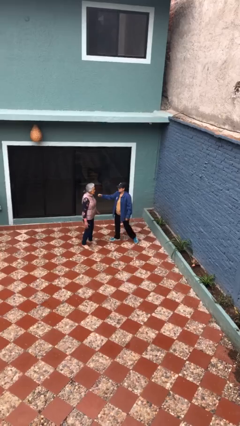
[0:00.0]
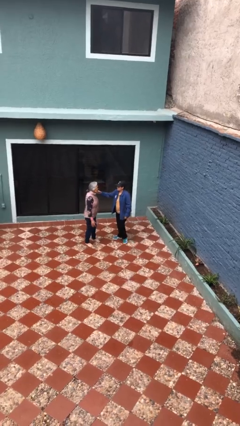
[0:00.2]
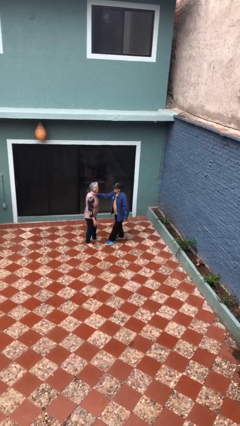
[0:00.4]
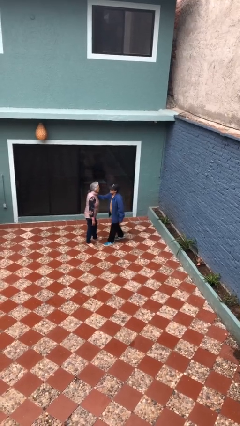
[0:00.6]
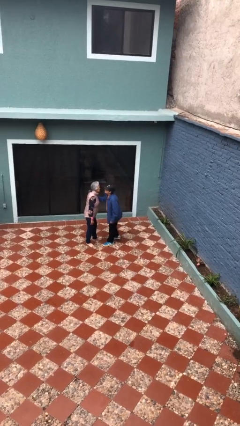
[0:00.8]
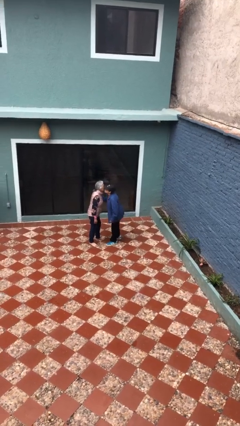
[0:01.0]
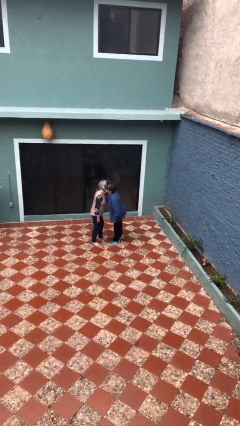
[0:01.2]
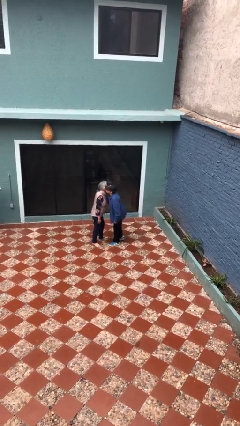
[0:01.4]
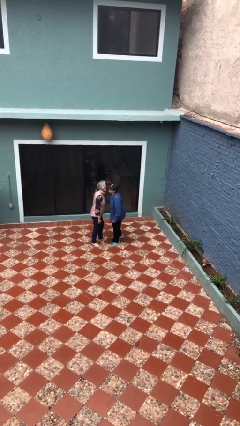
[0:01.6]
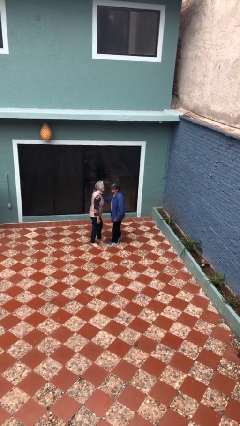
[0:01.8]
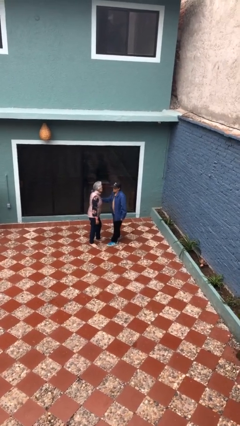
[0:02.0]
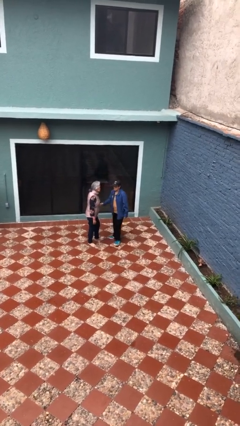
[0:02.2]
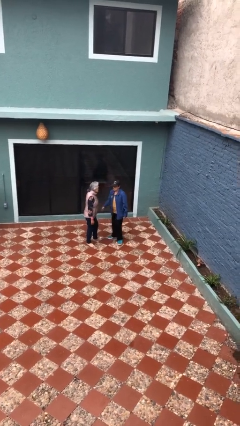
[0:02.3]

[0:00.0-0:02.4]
person kisses cheek of person

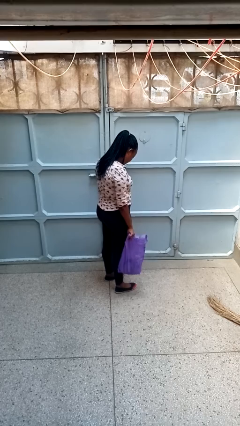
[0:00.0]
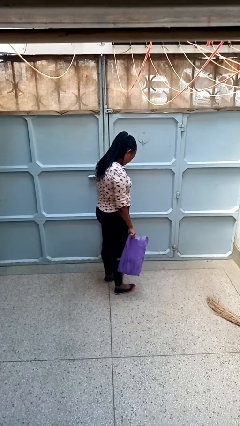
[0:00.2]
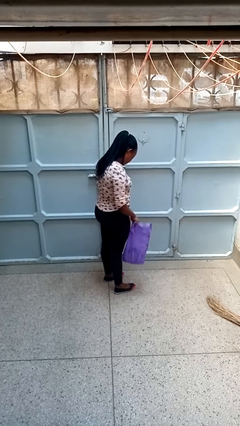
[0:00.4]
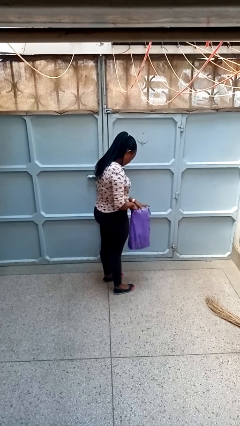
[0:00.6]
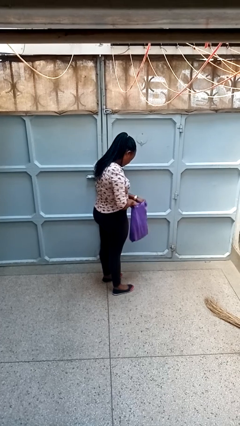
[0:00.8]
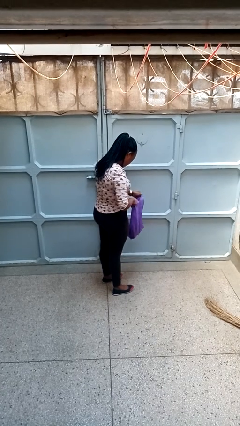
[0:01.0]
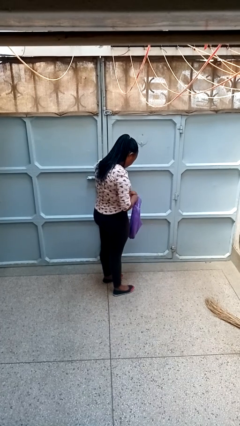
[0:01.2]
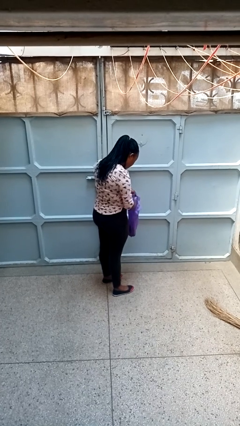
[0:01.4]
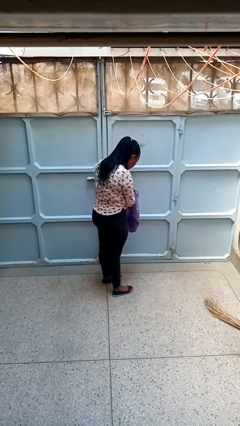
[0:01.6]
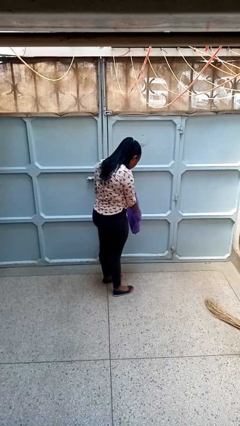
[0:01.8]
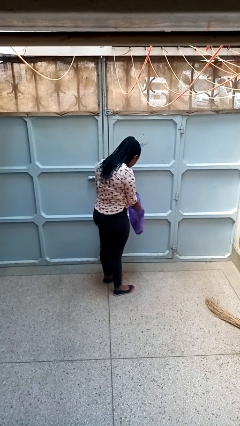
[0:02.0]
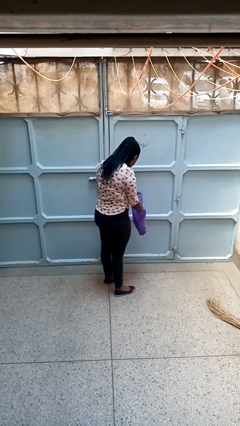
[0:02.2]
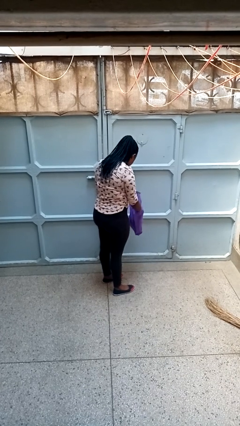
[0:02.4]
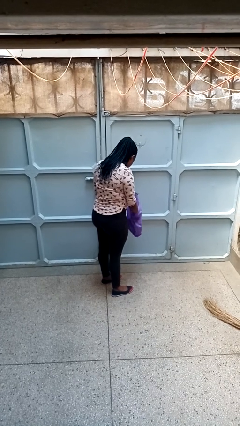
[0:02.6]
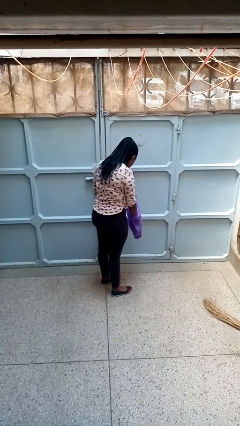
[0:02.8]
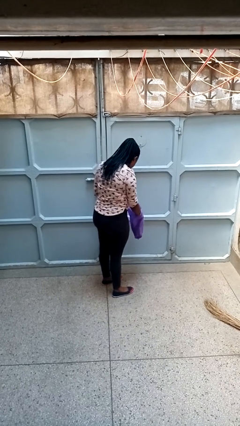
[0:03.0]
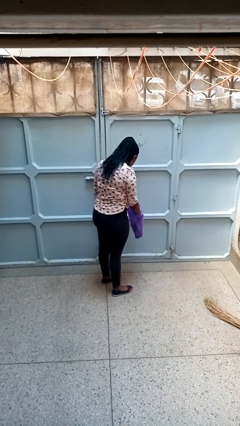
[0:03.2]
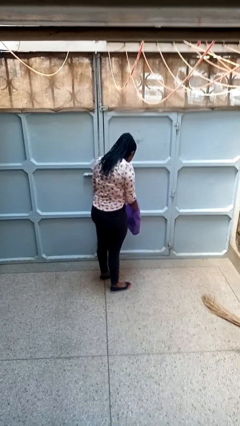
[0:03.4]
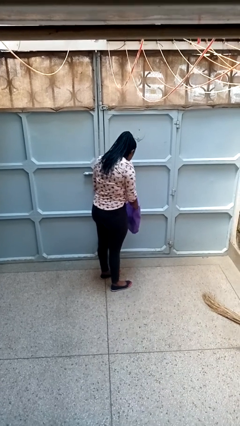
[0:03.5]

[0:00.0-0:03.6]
person searches in bag

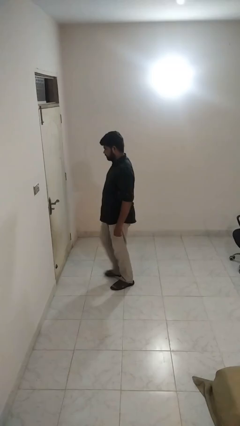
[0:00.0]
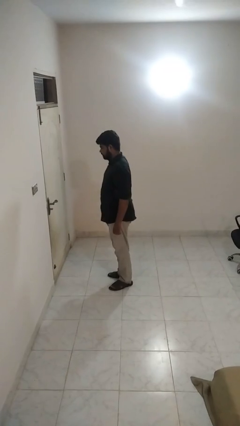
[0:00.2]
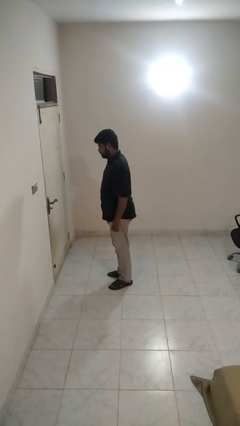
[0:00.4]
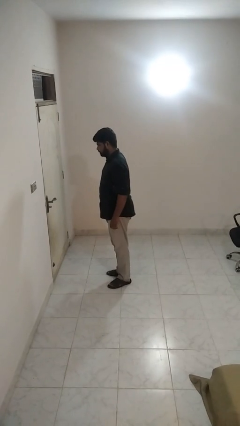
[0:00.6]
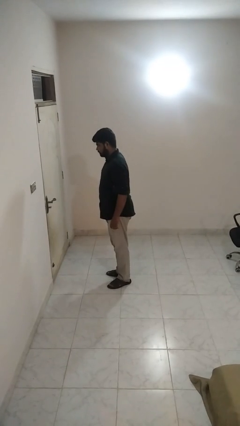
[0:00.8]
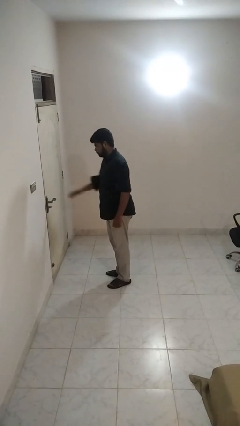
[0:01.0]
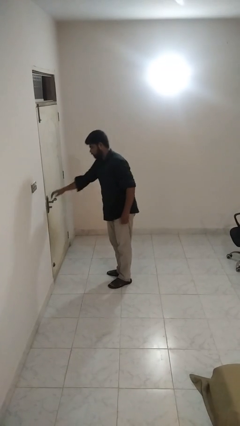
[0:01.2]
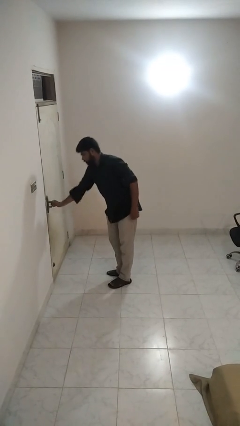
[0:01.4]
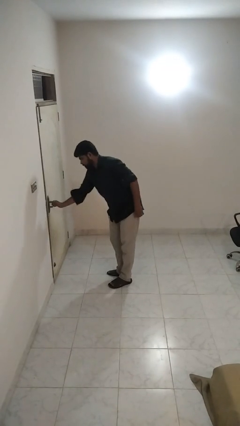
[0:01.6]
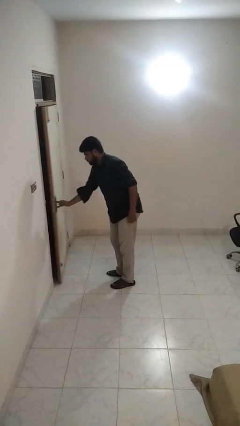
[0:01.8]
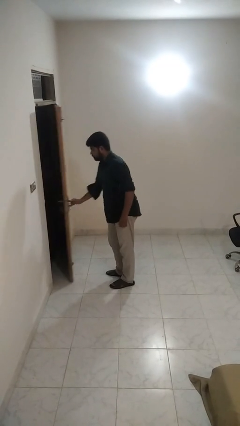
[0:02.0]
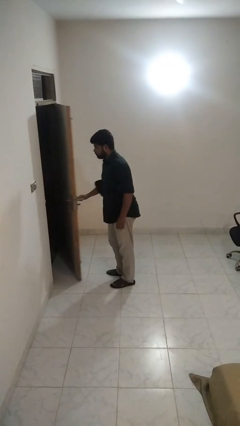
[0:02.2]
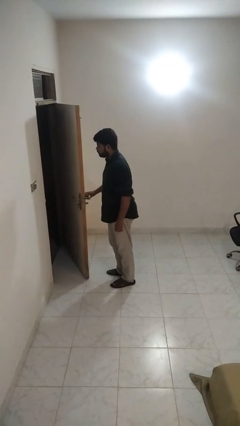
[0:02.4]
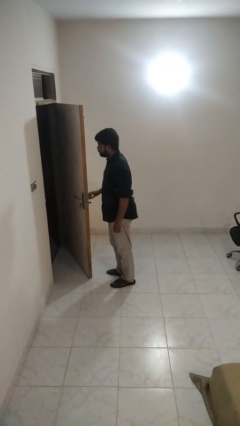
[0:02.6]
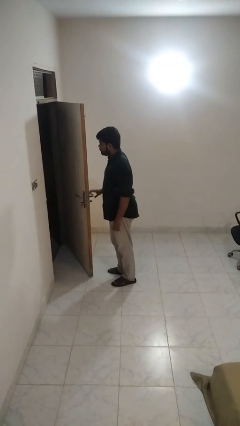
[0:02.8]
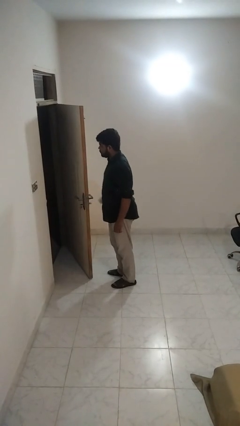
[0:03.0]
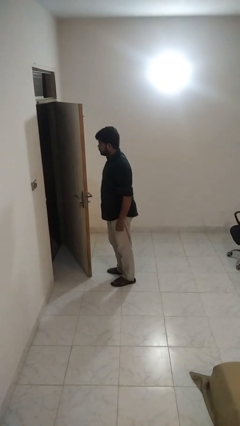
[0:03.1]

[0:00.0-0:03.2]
person opens facility door

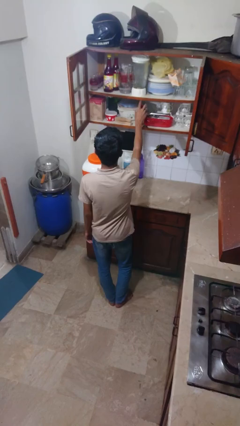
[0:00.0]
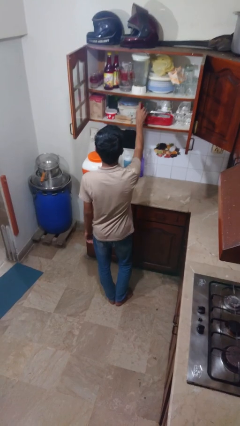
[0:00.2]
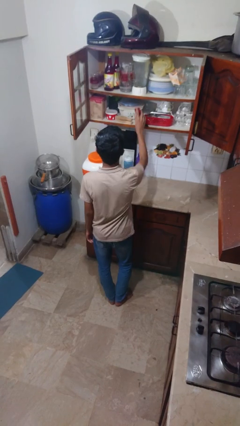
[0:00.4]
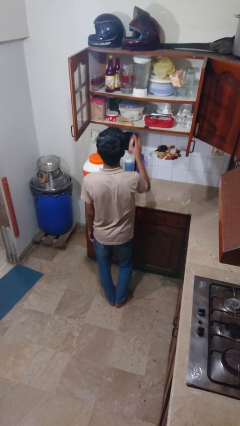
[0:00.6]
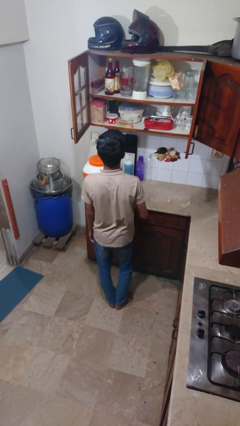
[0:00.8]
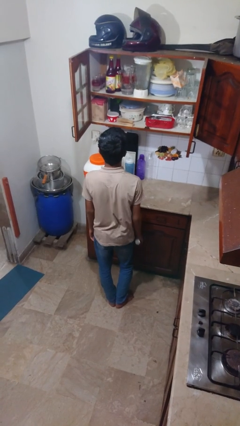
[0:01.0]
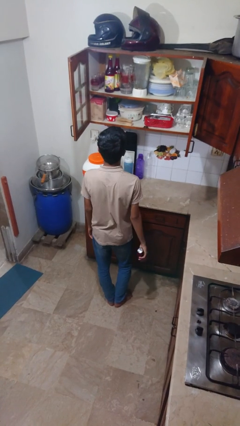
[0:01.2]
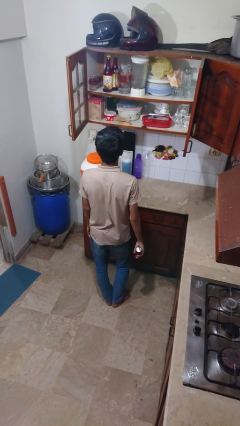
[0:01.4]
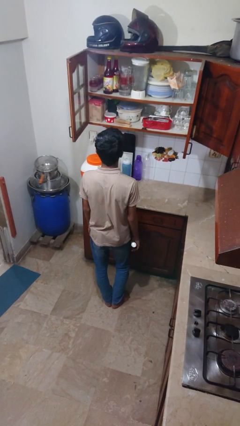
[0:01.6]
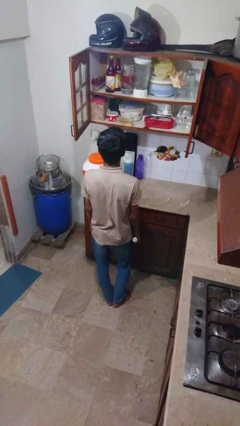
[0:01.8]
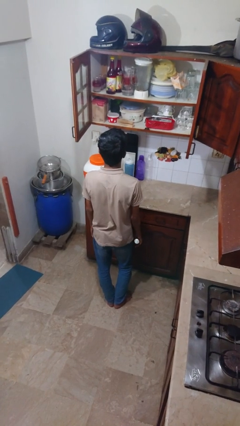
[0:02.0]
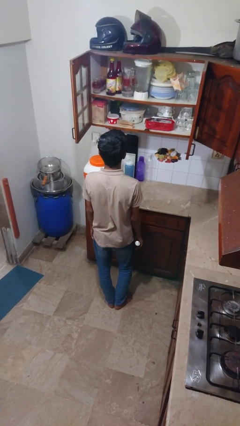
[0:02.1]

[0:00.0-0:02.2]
person picks up object from cabinet

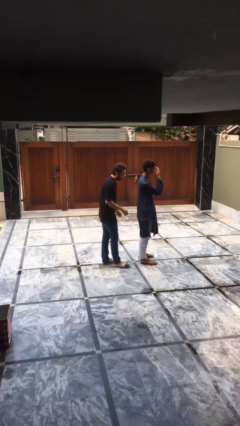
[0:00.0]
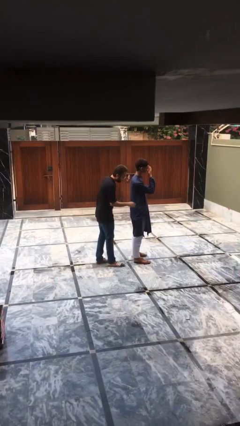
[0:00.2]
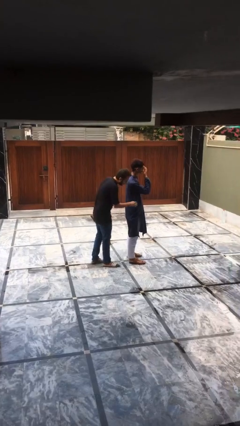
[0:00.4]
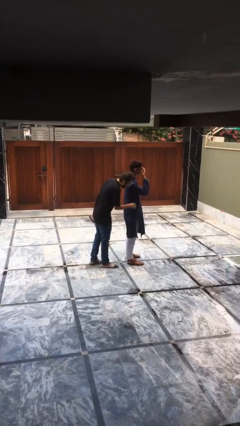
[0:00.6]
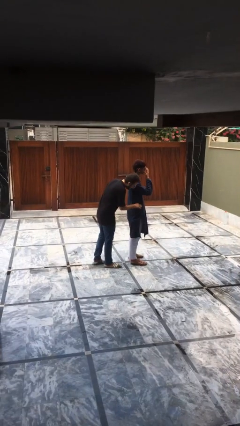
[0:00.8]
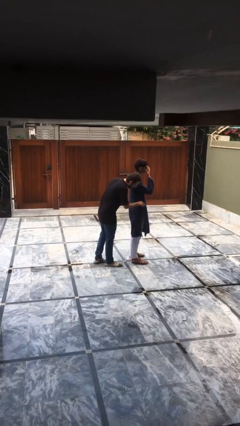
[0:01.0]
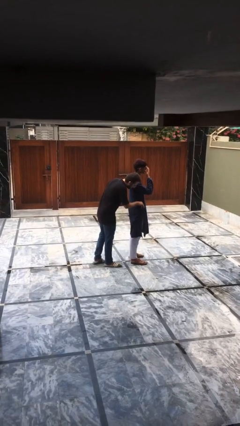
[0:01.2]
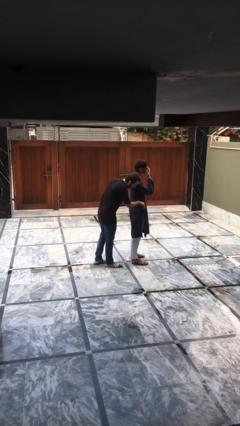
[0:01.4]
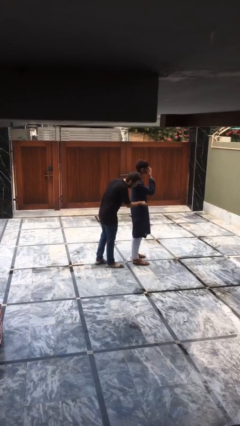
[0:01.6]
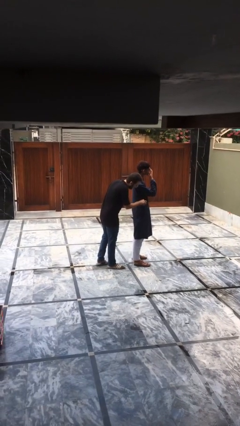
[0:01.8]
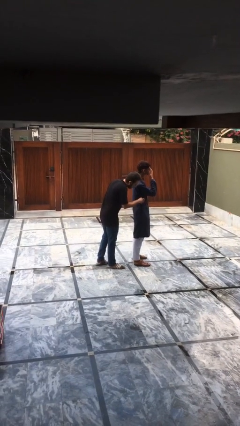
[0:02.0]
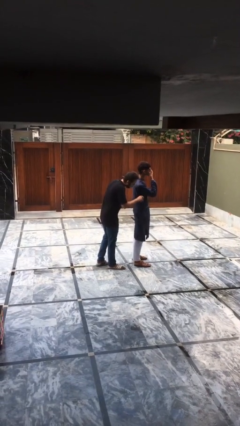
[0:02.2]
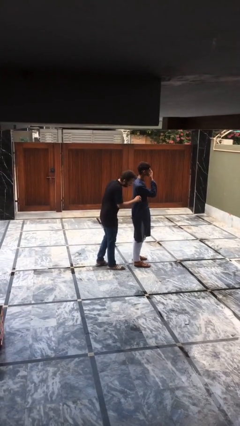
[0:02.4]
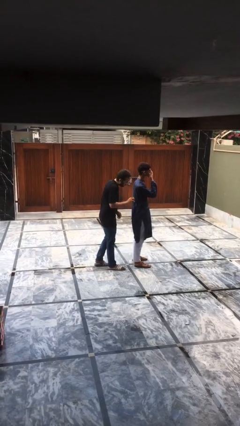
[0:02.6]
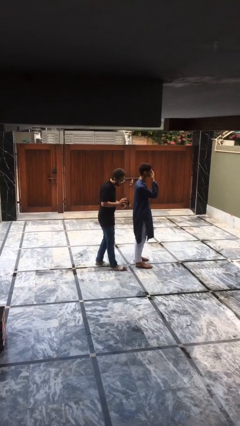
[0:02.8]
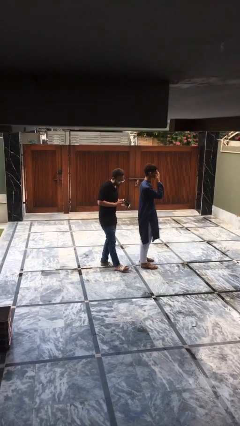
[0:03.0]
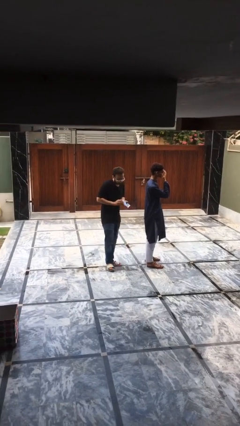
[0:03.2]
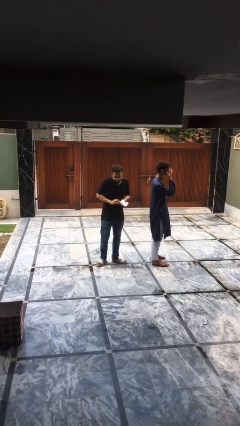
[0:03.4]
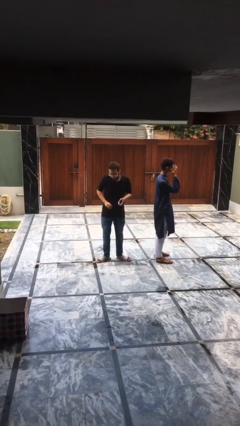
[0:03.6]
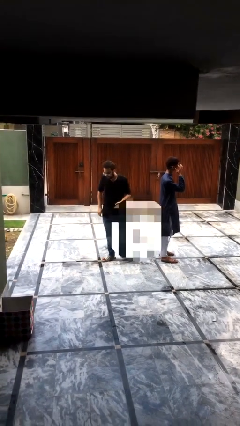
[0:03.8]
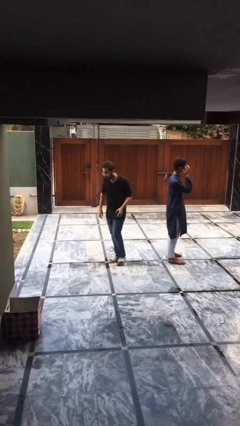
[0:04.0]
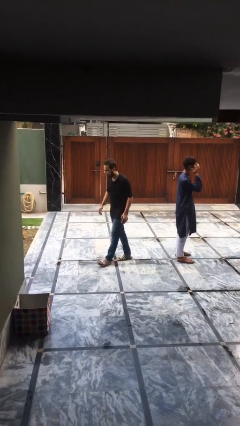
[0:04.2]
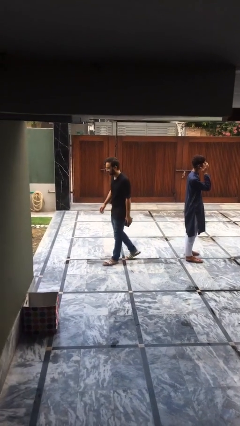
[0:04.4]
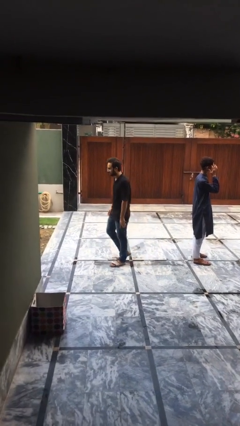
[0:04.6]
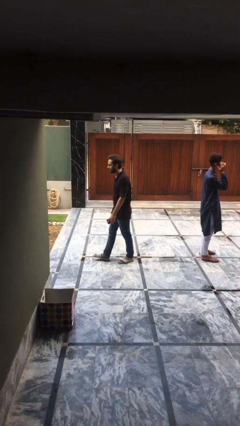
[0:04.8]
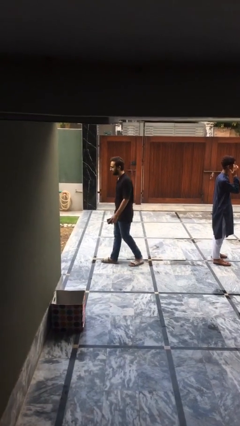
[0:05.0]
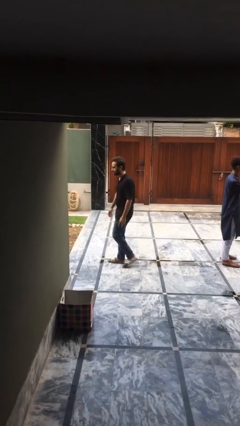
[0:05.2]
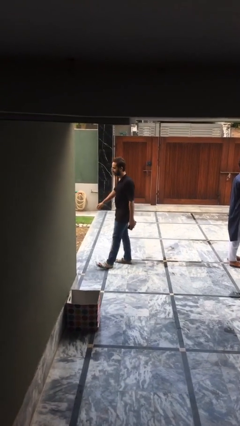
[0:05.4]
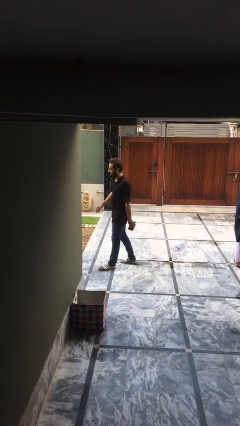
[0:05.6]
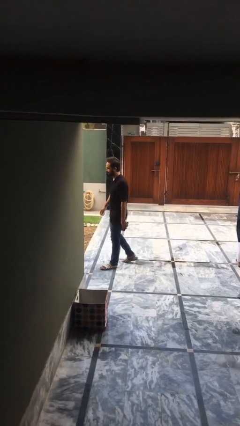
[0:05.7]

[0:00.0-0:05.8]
person steals object from person

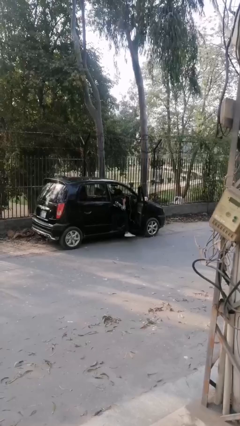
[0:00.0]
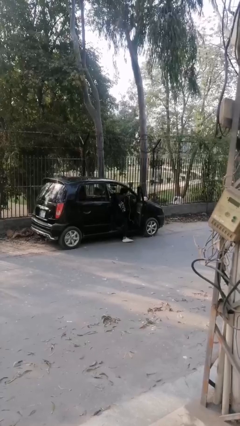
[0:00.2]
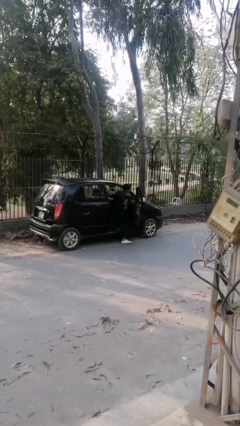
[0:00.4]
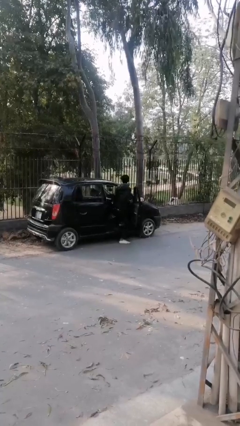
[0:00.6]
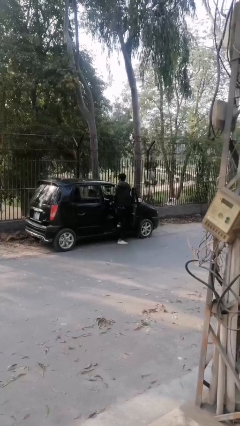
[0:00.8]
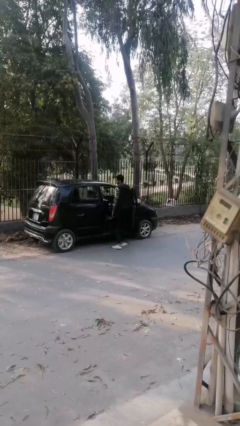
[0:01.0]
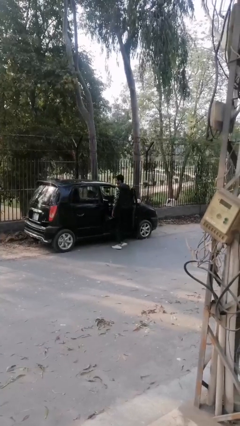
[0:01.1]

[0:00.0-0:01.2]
person exits car
